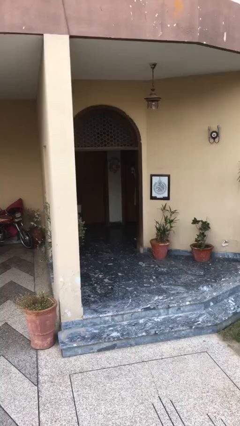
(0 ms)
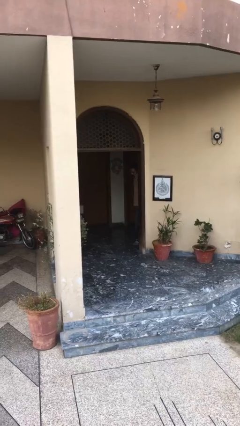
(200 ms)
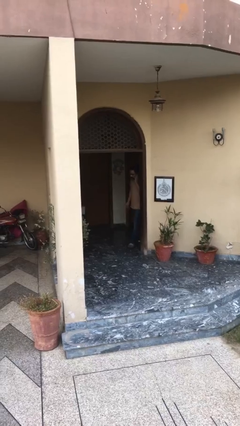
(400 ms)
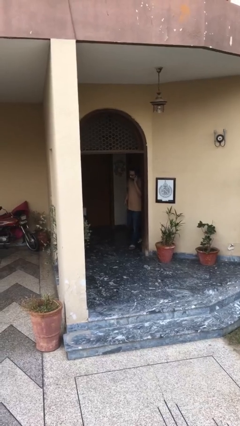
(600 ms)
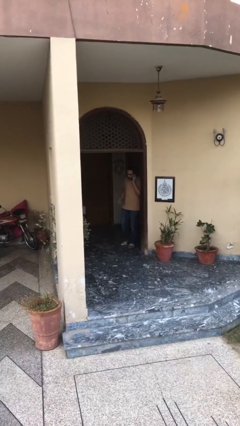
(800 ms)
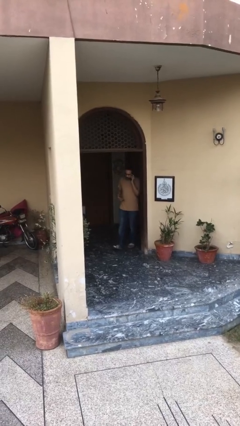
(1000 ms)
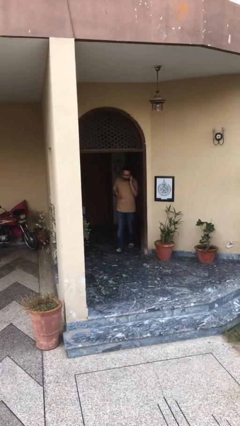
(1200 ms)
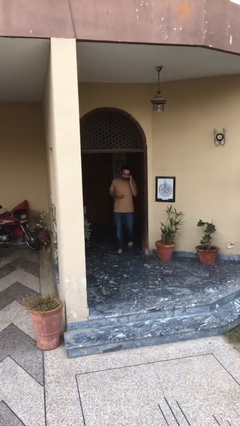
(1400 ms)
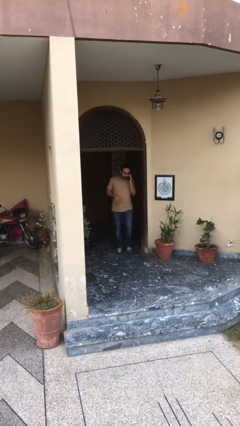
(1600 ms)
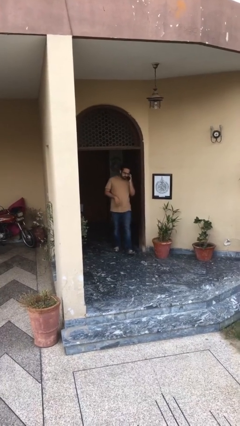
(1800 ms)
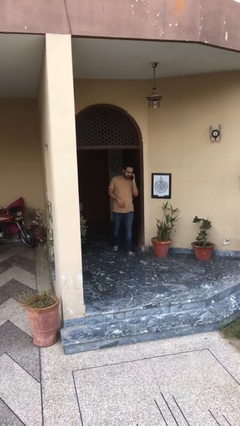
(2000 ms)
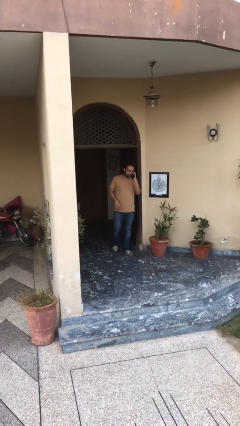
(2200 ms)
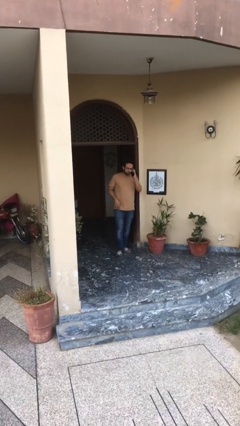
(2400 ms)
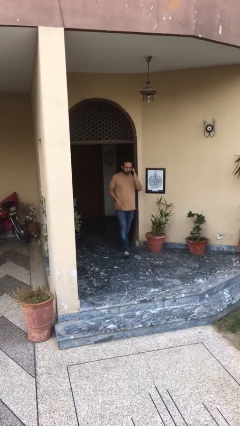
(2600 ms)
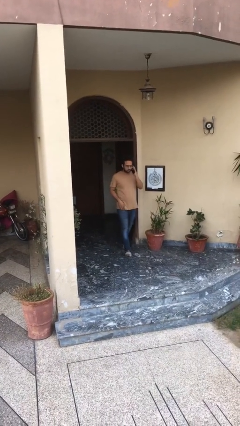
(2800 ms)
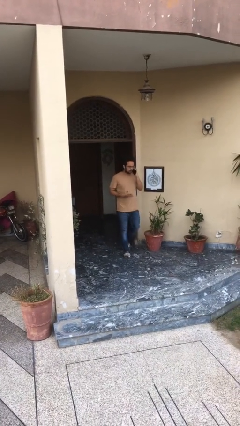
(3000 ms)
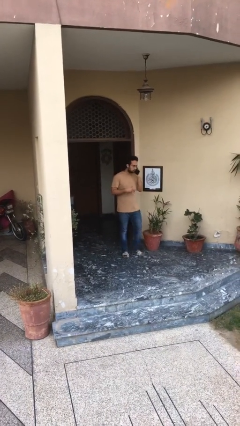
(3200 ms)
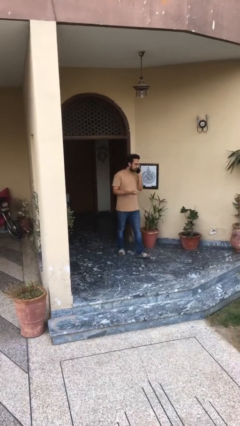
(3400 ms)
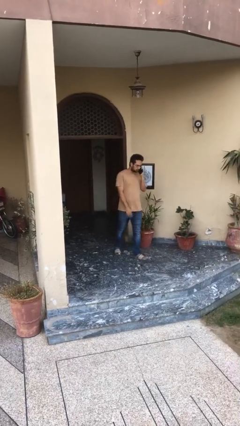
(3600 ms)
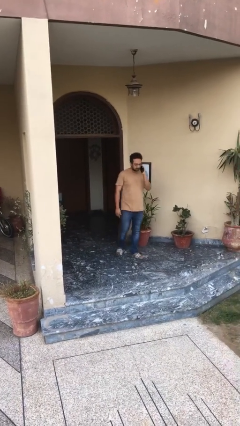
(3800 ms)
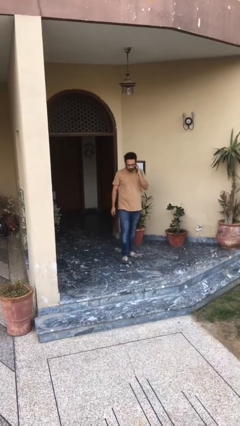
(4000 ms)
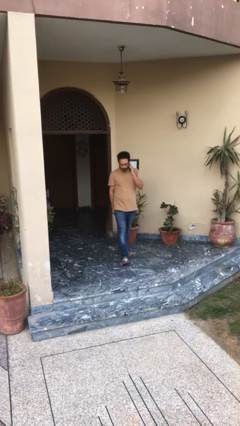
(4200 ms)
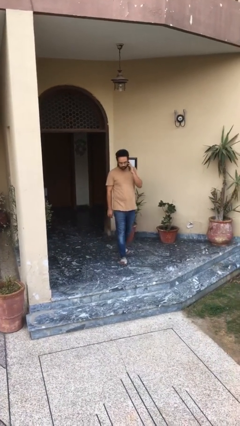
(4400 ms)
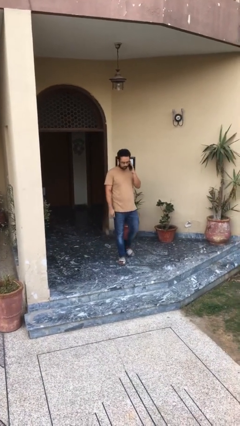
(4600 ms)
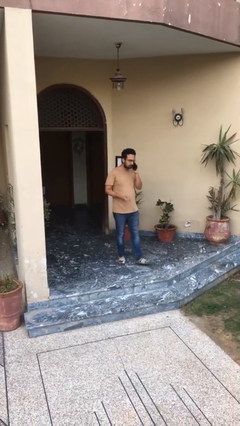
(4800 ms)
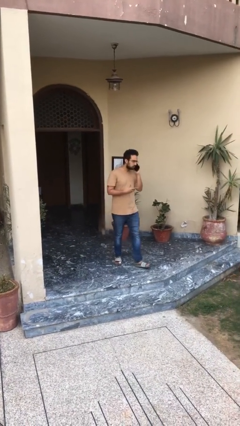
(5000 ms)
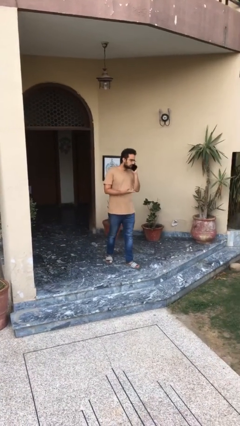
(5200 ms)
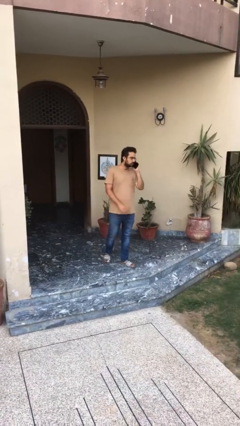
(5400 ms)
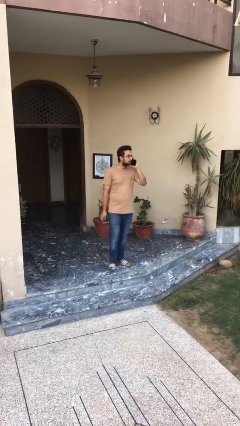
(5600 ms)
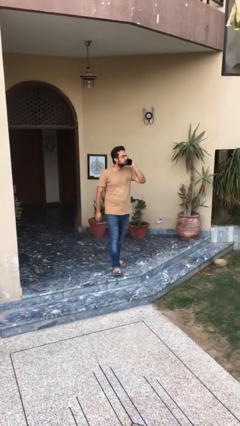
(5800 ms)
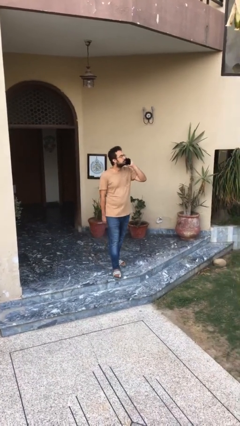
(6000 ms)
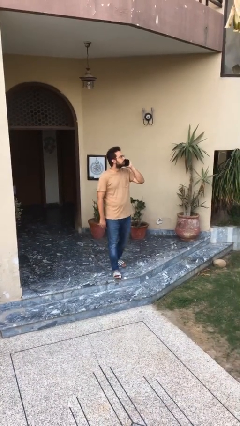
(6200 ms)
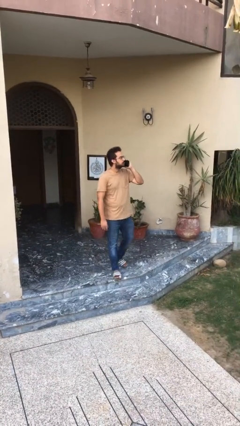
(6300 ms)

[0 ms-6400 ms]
person enters scene through structure

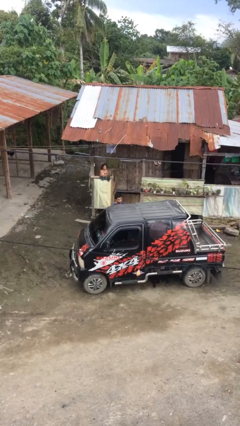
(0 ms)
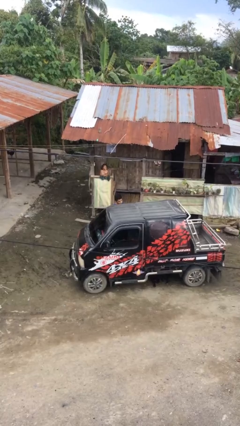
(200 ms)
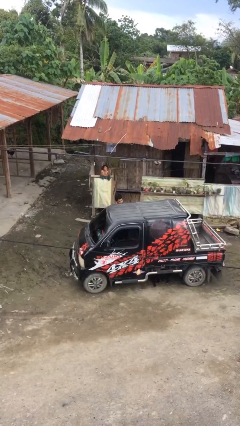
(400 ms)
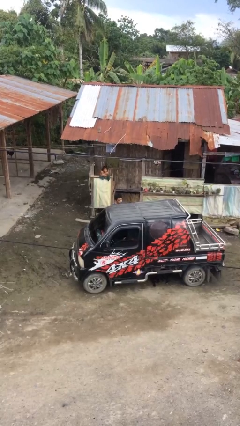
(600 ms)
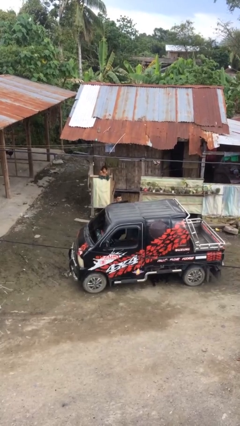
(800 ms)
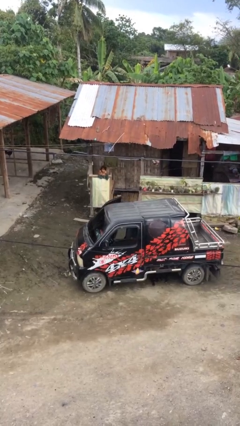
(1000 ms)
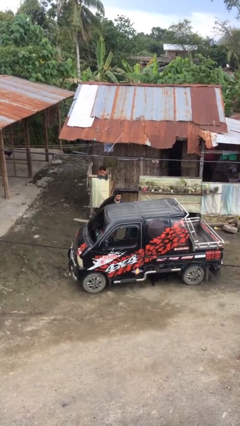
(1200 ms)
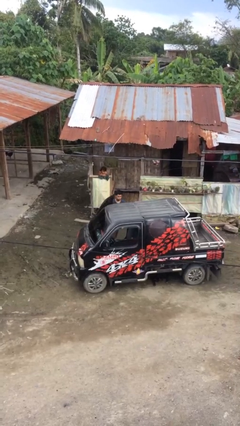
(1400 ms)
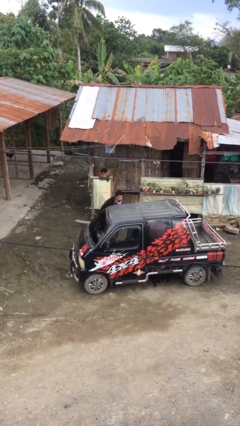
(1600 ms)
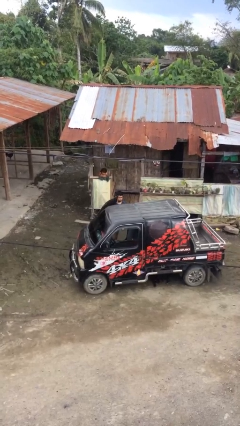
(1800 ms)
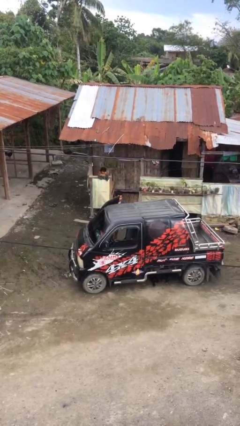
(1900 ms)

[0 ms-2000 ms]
person opens car door

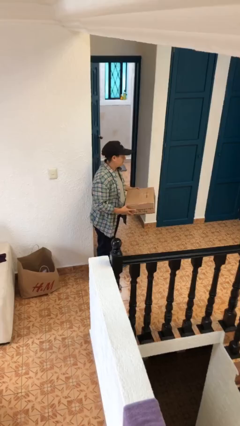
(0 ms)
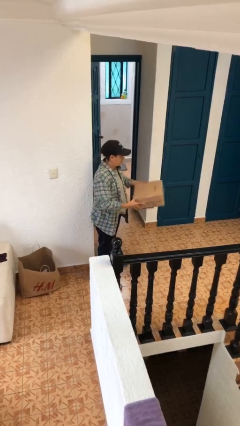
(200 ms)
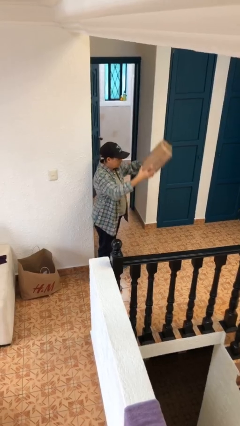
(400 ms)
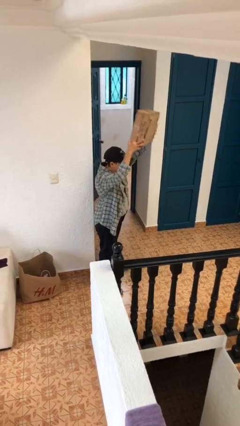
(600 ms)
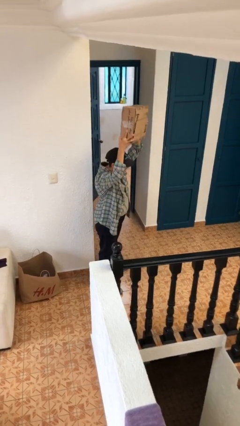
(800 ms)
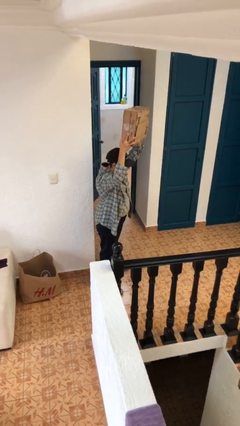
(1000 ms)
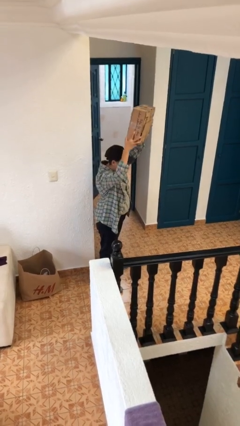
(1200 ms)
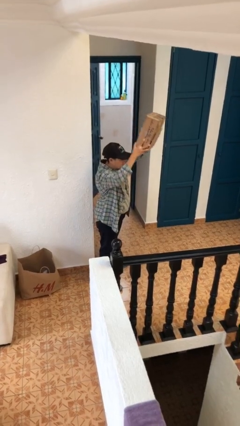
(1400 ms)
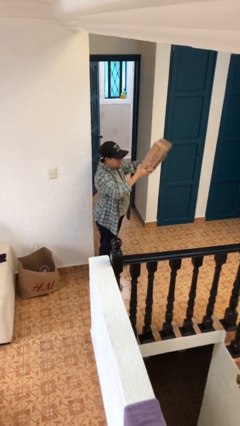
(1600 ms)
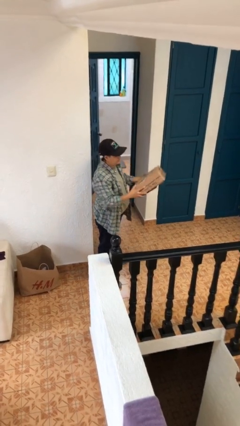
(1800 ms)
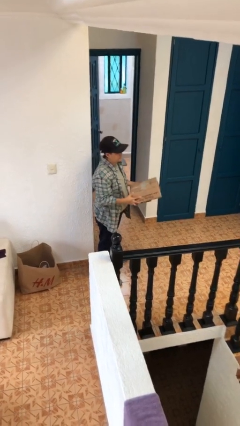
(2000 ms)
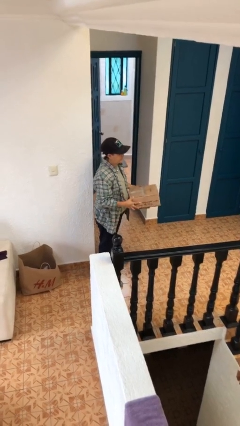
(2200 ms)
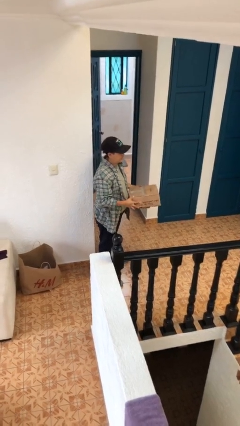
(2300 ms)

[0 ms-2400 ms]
person holds object above head

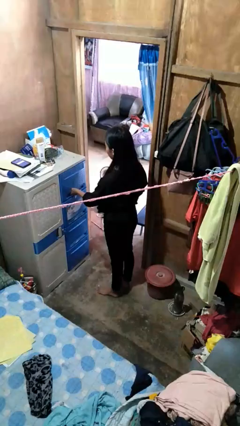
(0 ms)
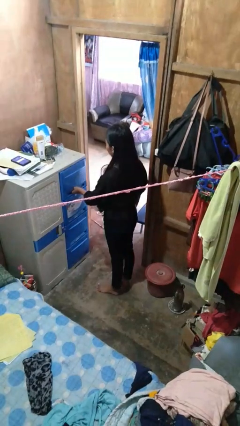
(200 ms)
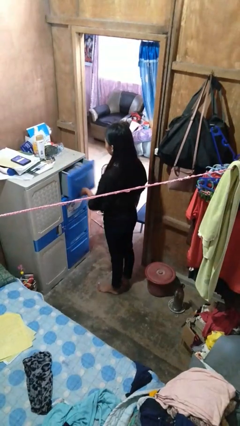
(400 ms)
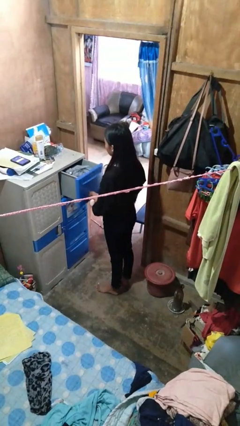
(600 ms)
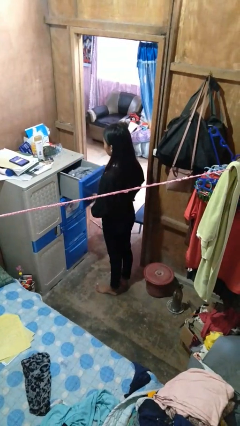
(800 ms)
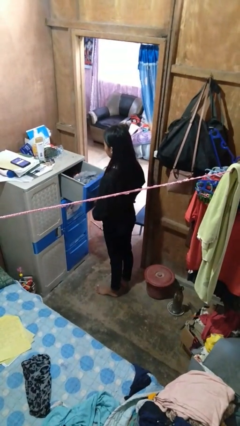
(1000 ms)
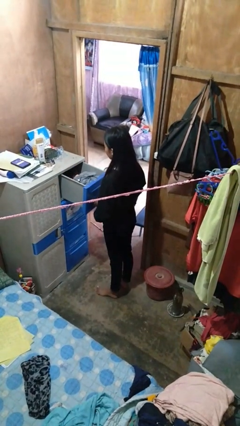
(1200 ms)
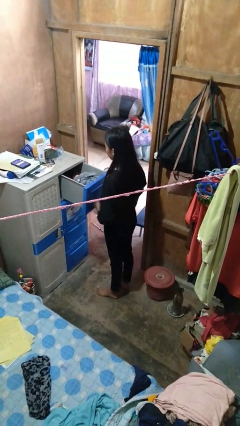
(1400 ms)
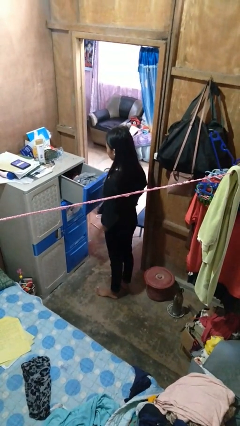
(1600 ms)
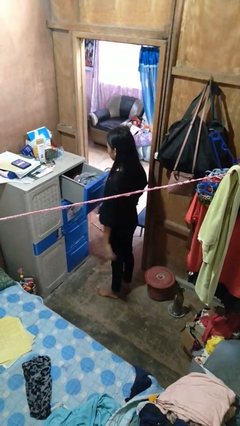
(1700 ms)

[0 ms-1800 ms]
person opens dresser drawer

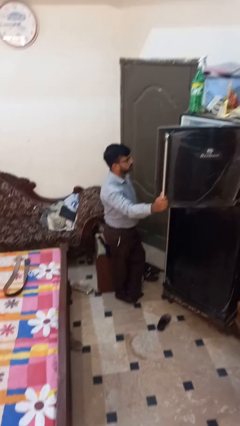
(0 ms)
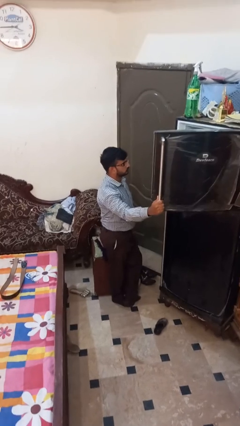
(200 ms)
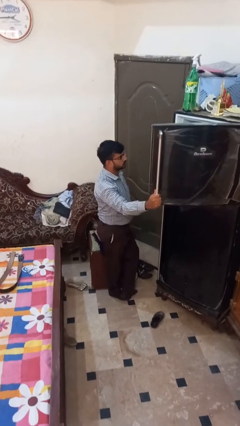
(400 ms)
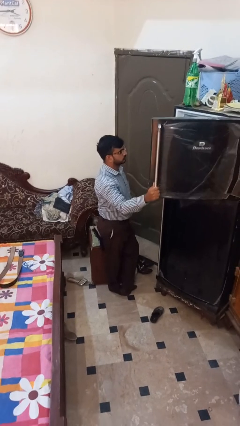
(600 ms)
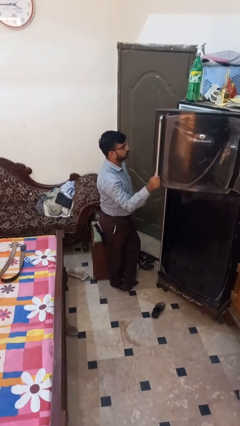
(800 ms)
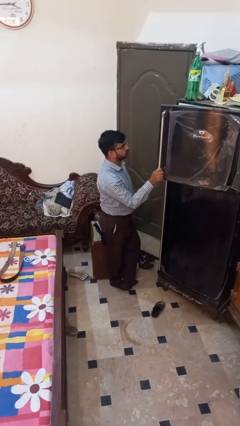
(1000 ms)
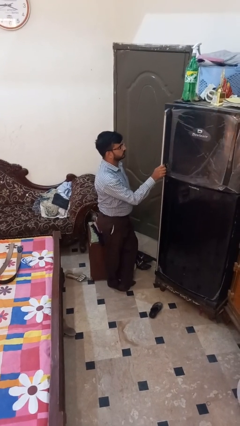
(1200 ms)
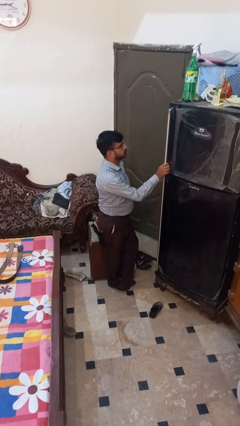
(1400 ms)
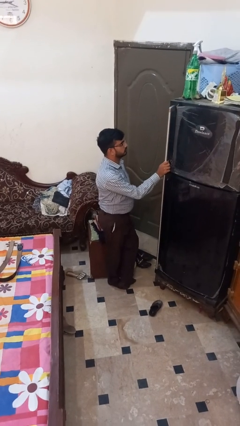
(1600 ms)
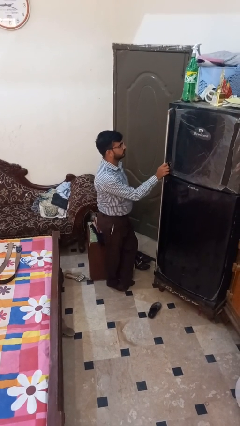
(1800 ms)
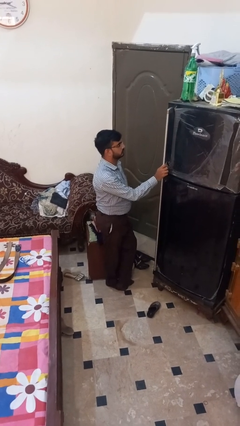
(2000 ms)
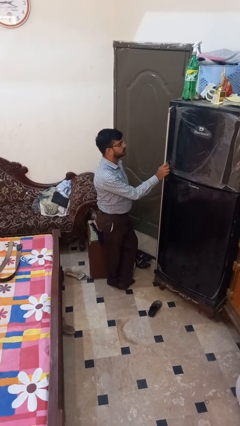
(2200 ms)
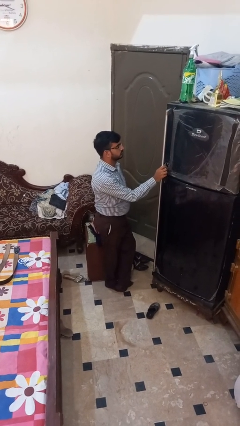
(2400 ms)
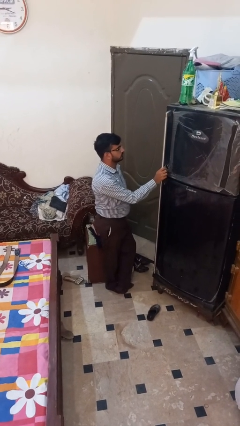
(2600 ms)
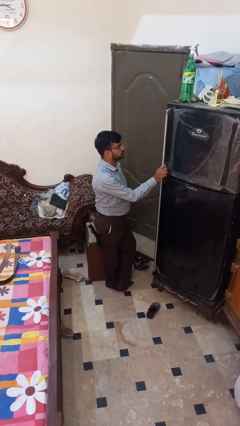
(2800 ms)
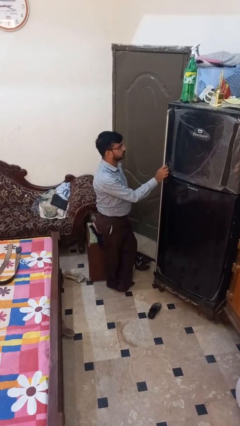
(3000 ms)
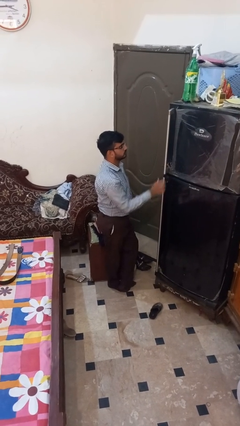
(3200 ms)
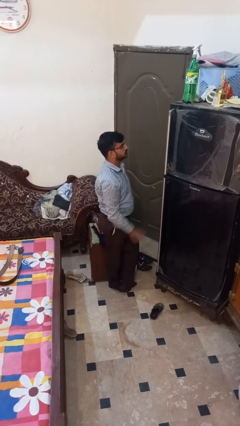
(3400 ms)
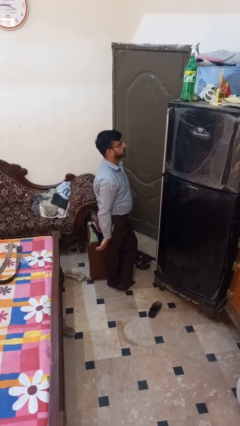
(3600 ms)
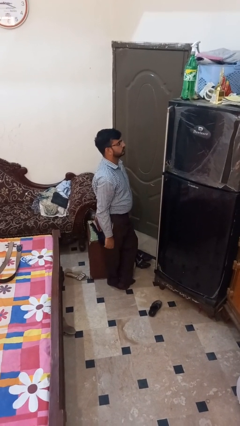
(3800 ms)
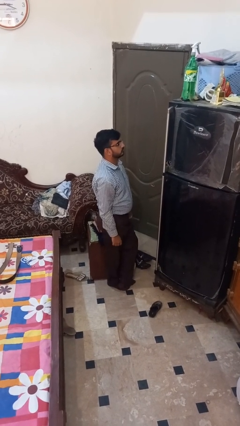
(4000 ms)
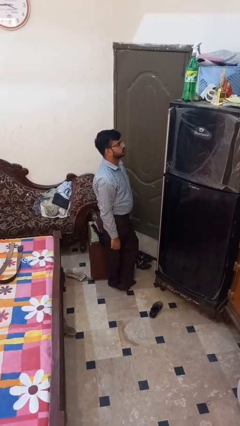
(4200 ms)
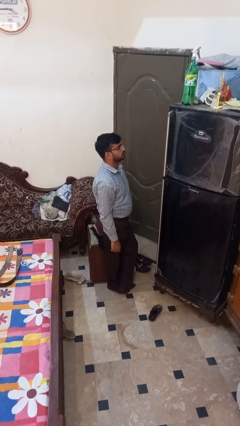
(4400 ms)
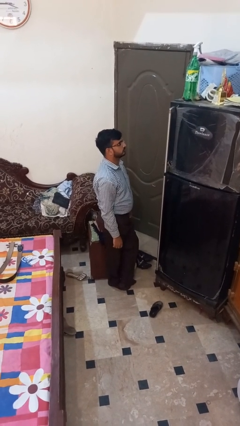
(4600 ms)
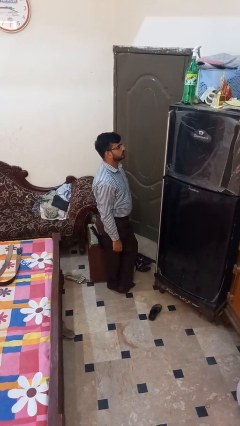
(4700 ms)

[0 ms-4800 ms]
person closes refrigerator
